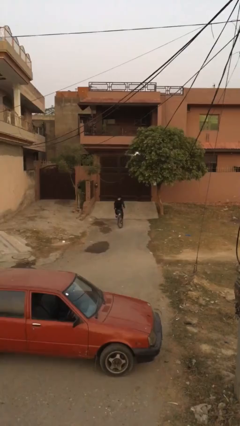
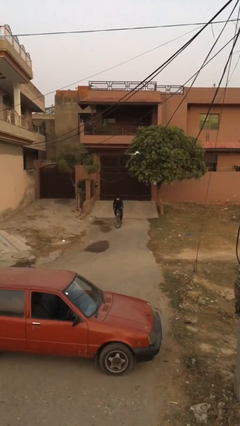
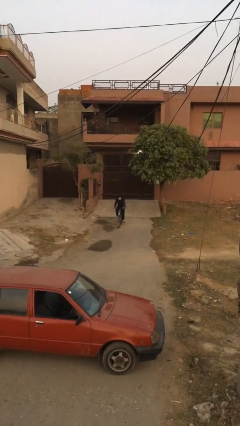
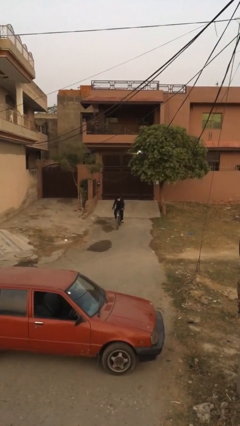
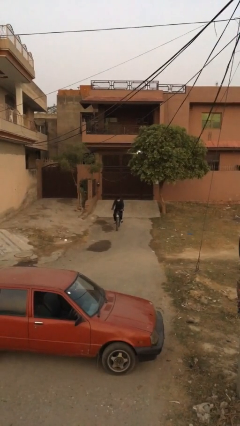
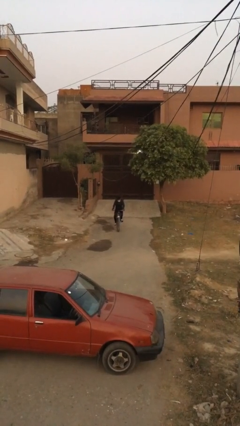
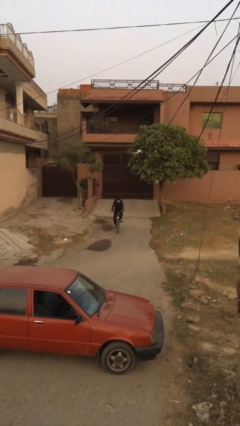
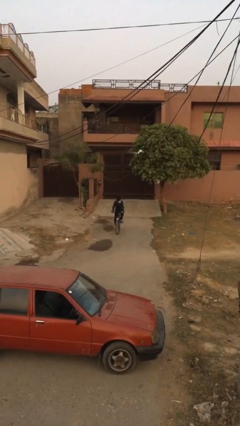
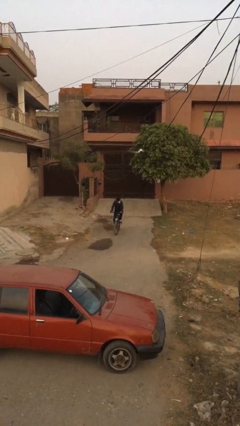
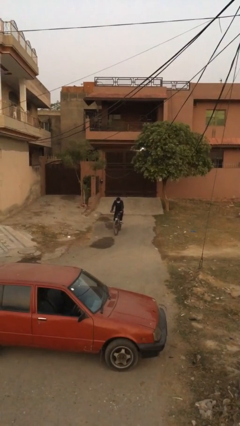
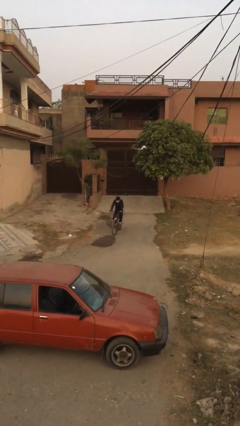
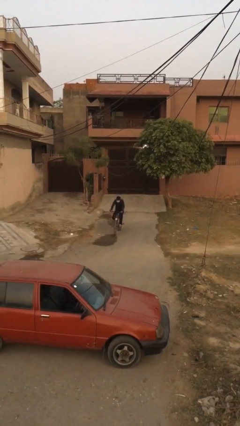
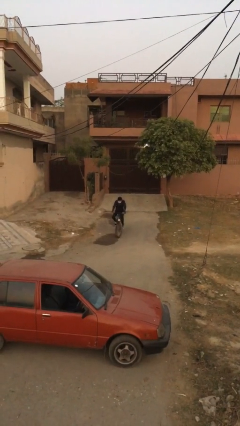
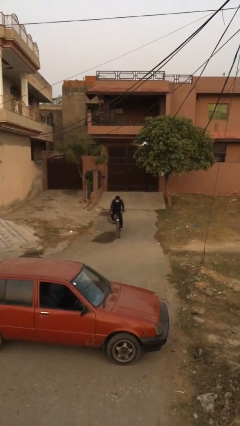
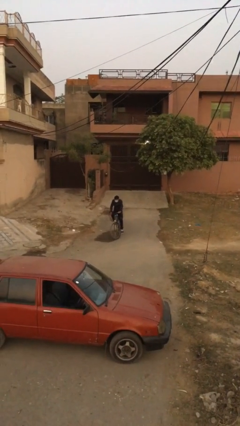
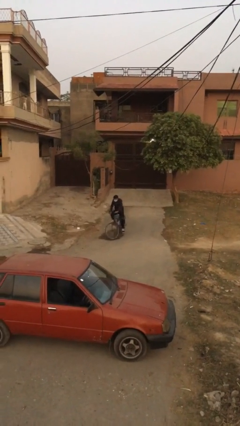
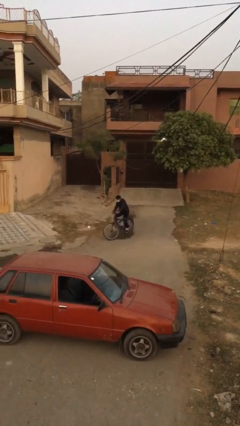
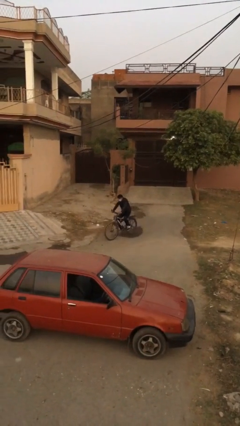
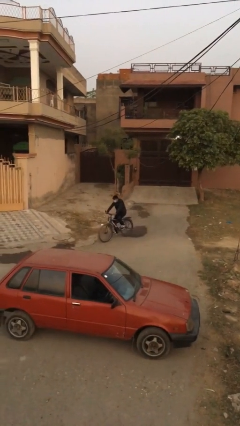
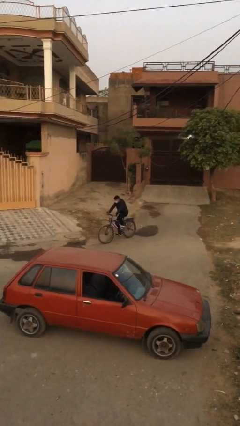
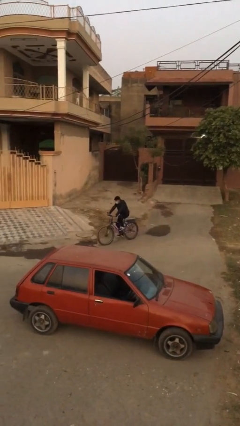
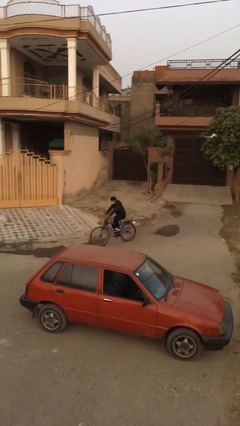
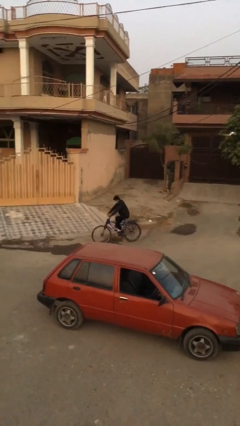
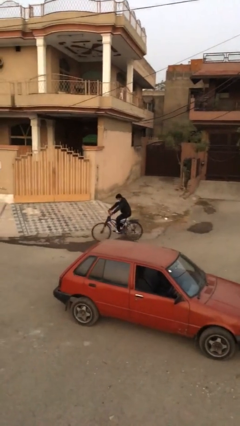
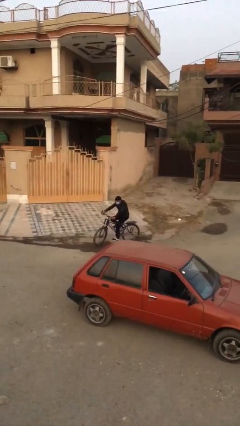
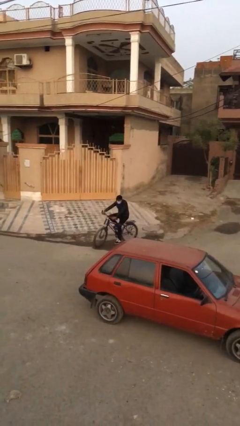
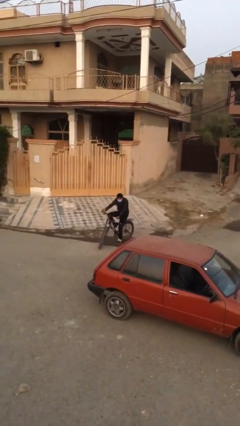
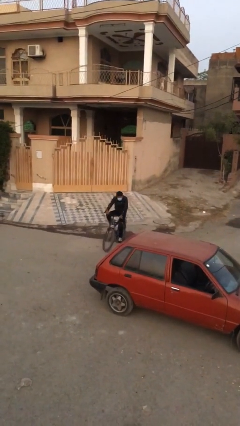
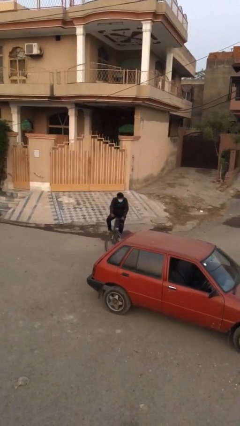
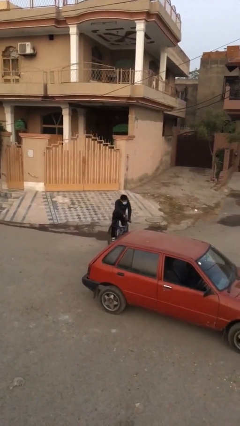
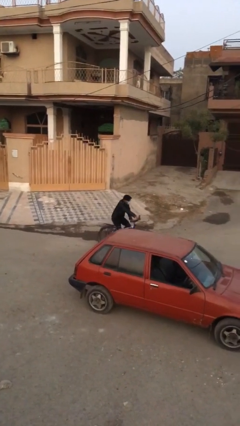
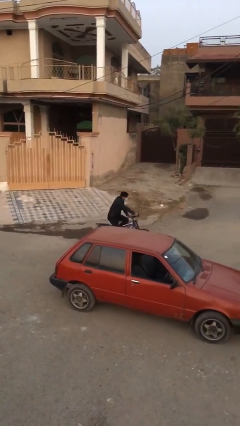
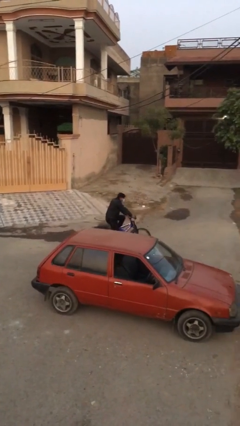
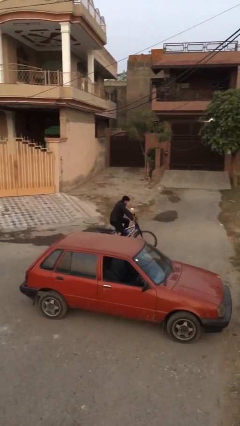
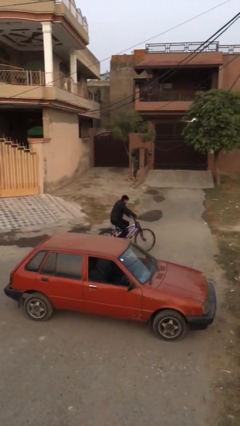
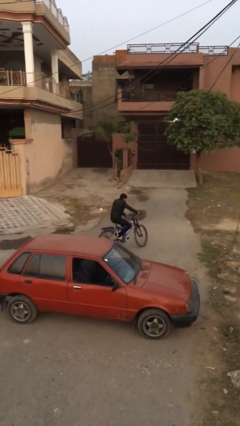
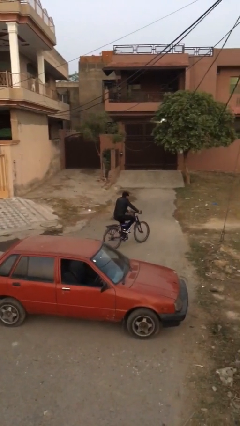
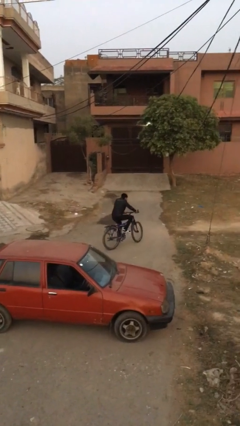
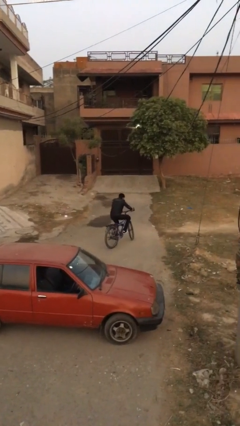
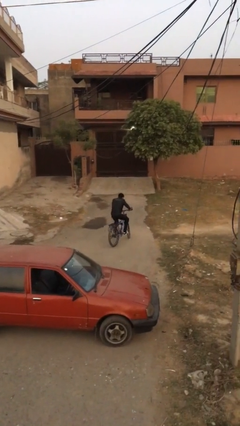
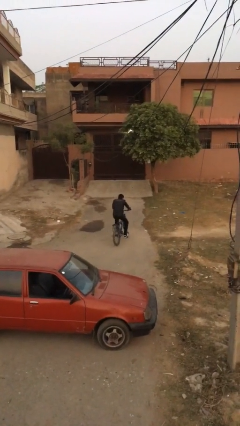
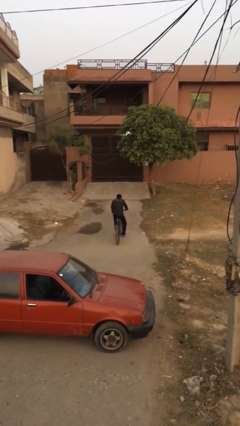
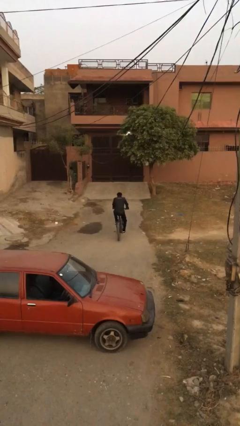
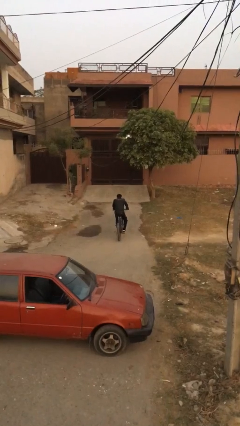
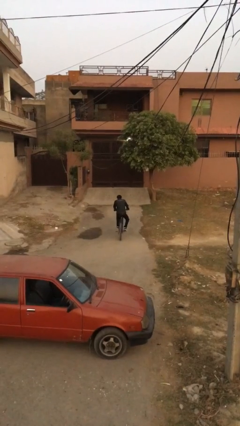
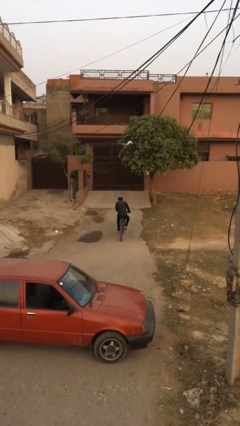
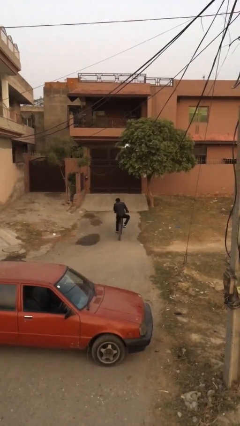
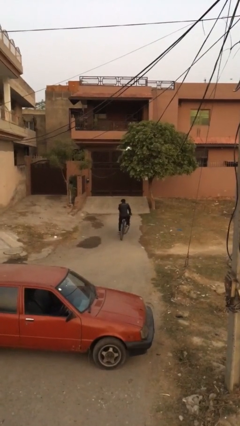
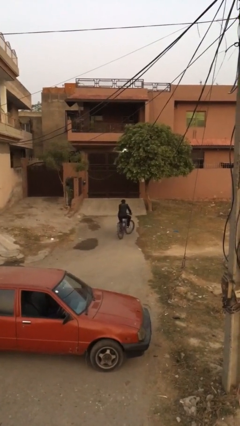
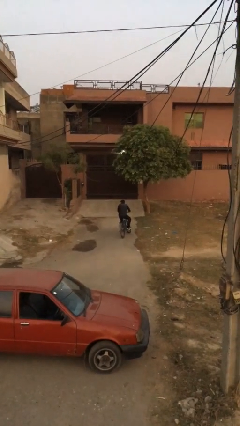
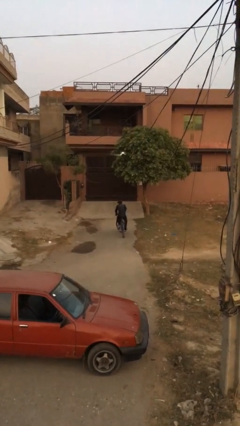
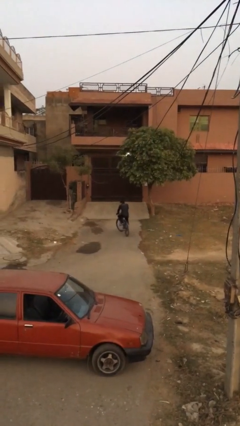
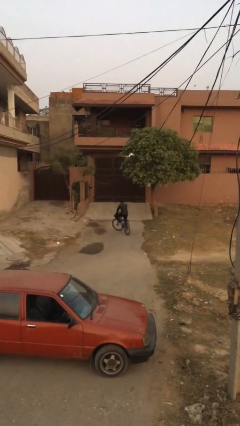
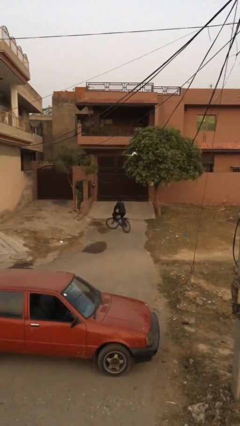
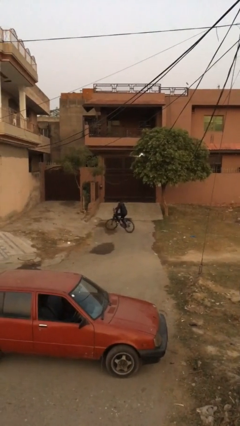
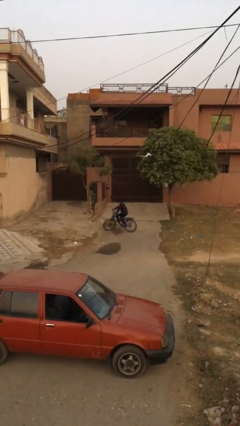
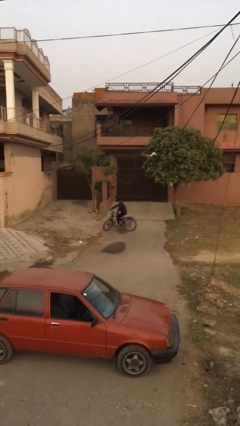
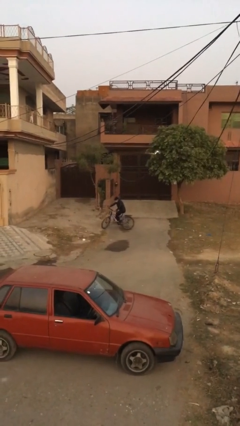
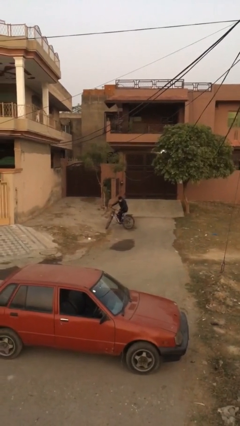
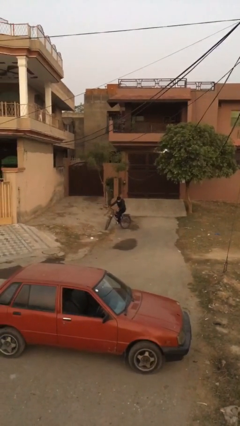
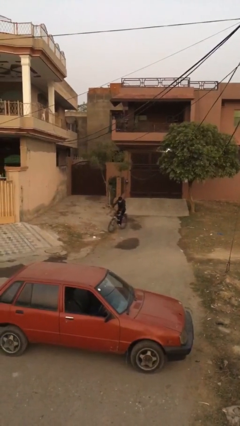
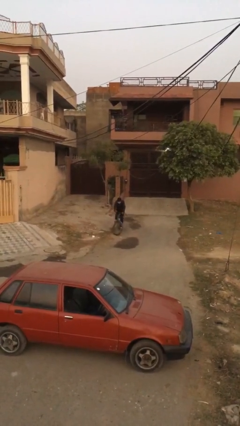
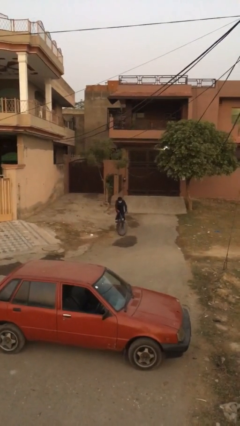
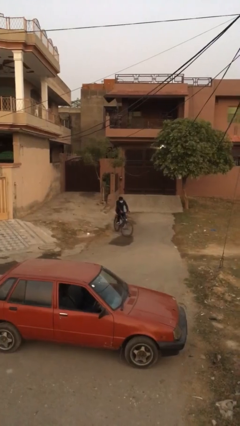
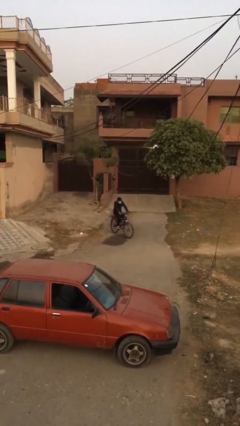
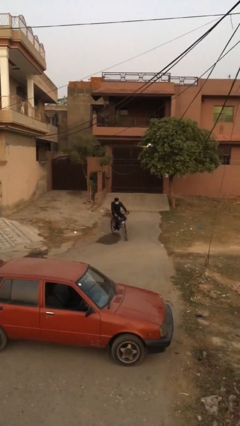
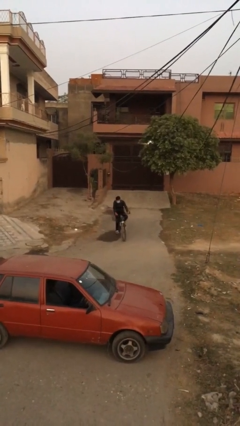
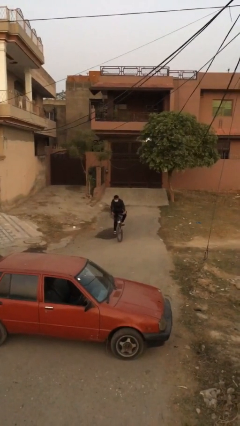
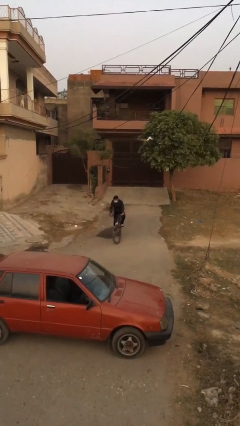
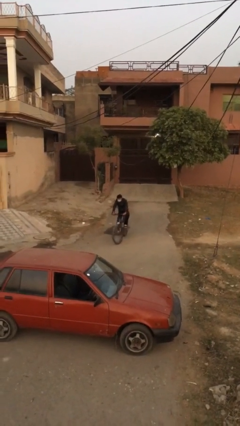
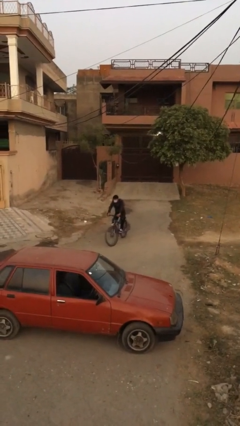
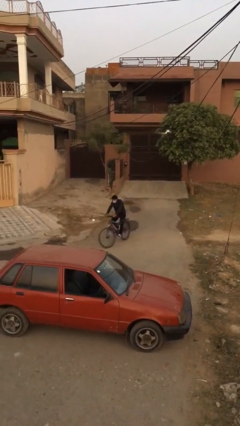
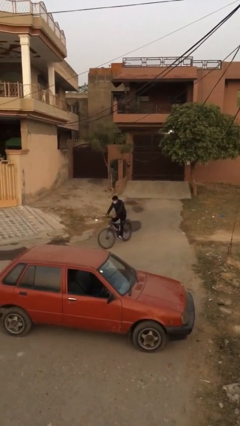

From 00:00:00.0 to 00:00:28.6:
person rides bicycle

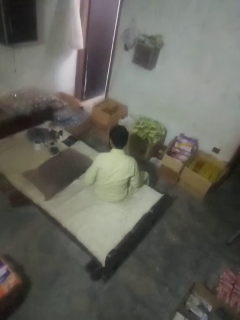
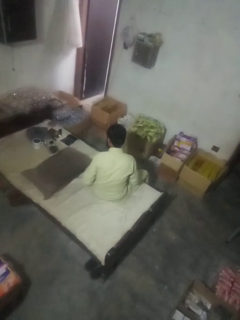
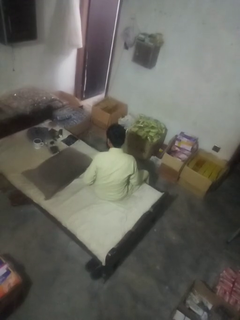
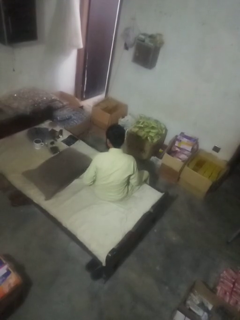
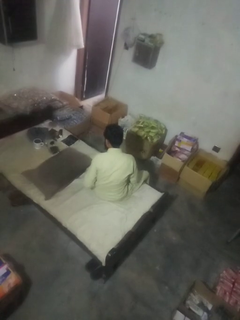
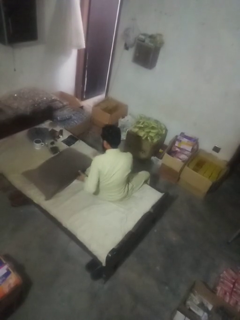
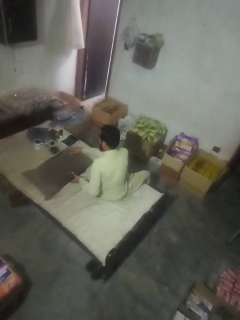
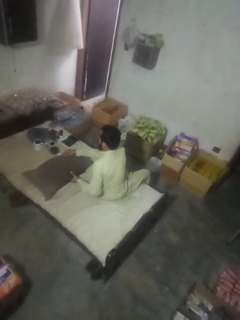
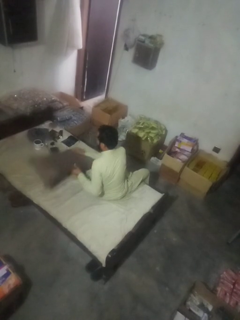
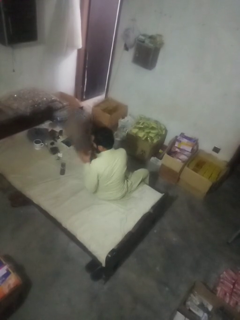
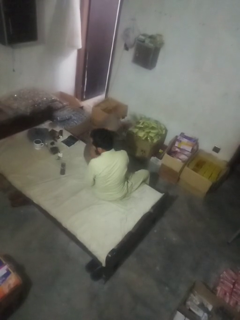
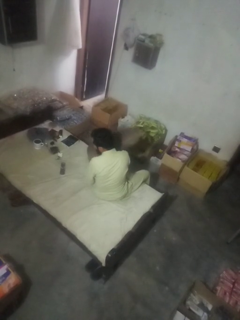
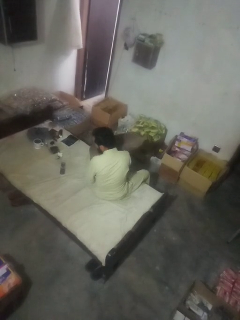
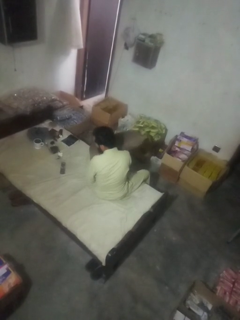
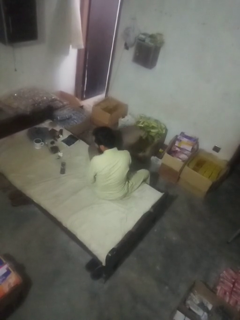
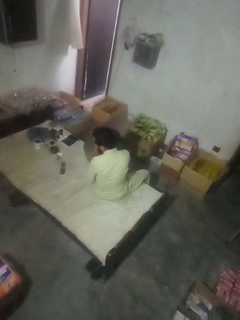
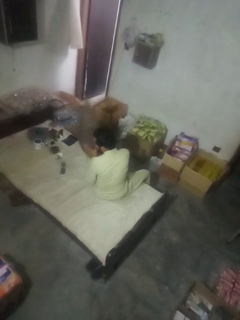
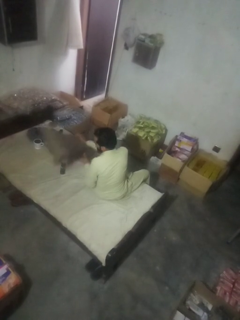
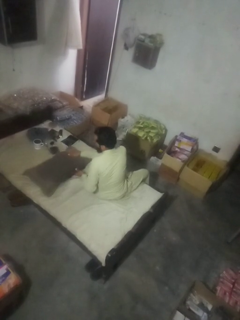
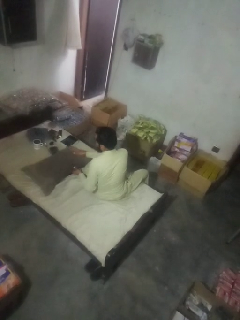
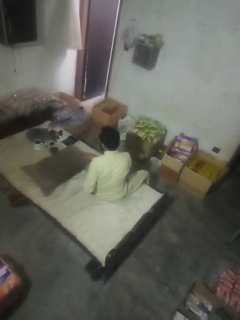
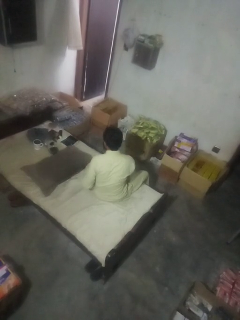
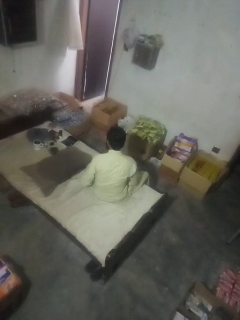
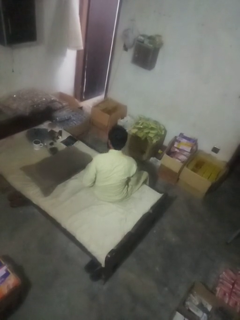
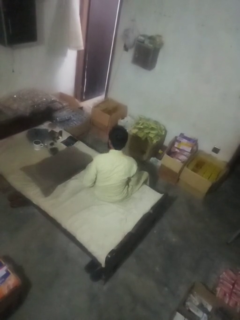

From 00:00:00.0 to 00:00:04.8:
person searches in couch

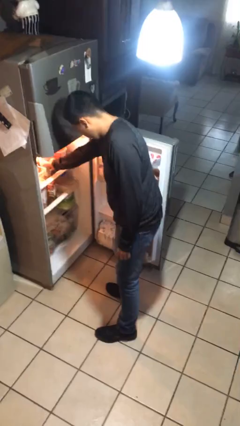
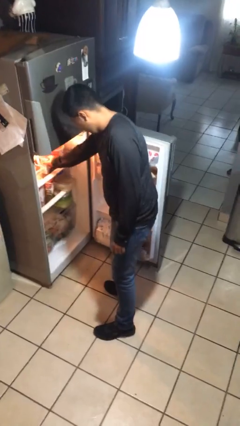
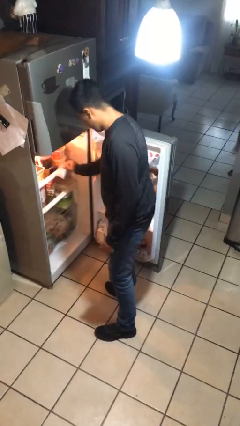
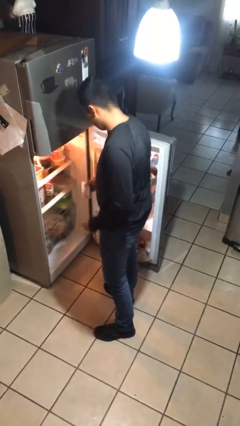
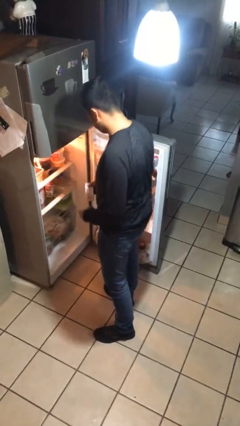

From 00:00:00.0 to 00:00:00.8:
person puts object into refrigerator
